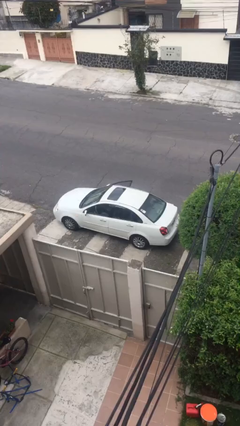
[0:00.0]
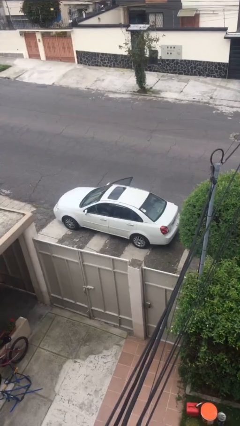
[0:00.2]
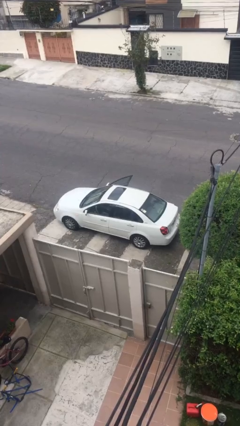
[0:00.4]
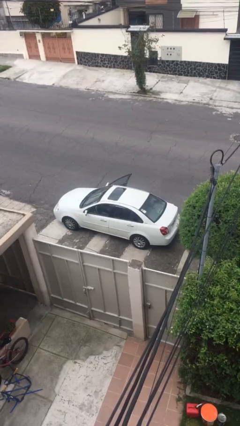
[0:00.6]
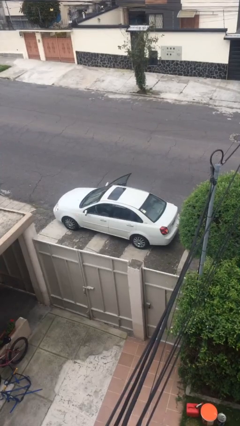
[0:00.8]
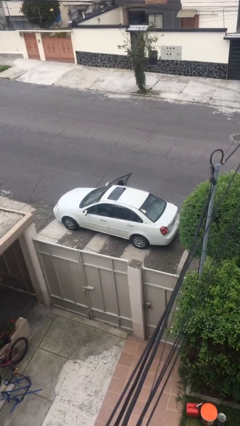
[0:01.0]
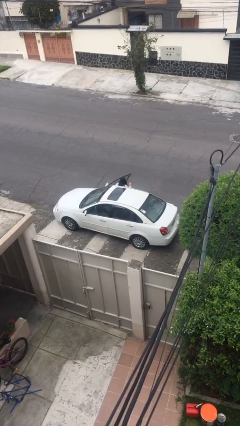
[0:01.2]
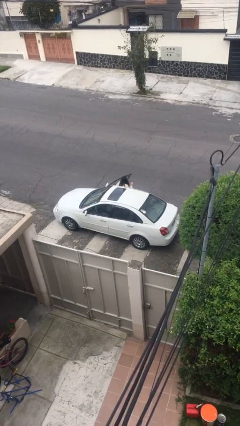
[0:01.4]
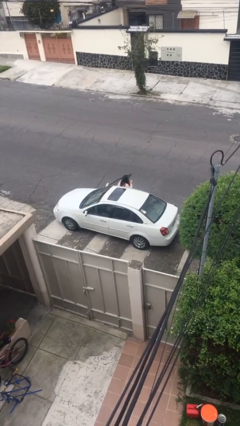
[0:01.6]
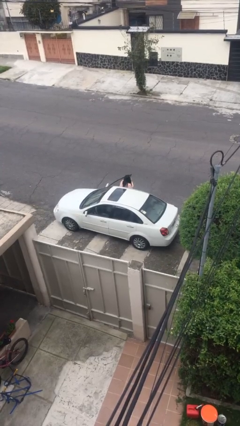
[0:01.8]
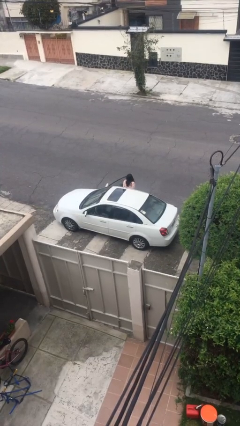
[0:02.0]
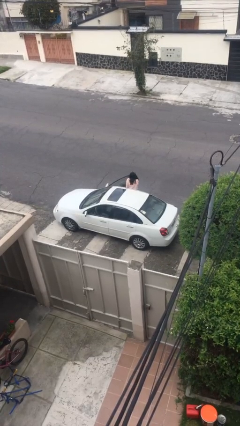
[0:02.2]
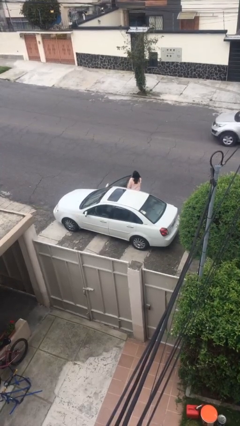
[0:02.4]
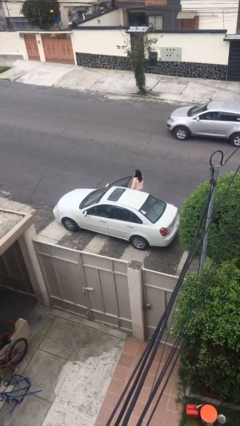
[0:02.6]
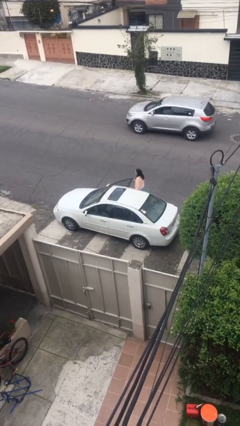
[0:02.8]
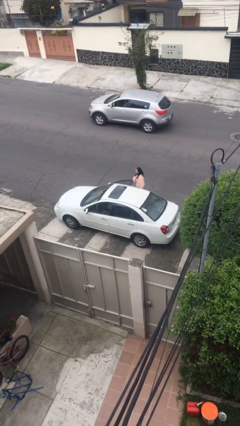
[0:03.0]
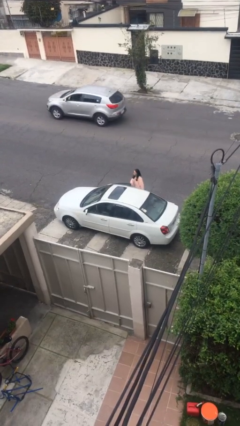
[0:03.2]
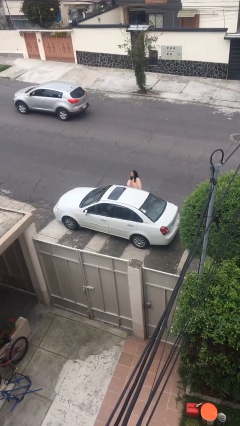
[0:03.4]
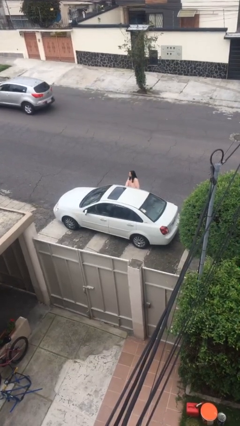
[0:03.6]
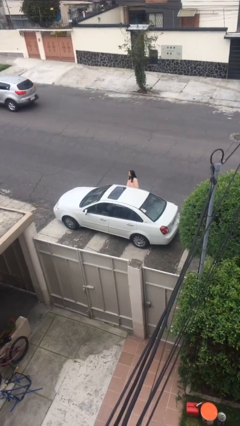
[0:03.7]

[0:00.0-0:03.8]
car drops off person

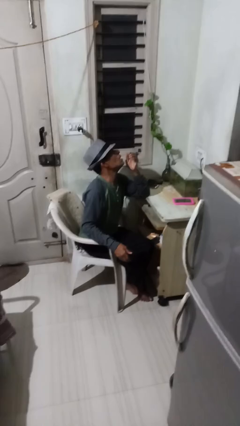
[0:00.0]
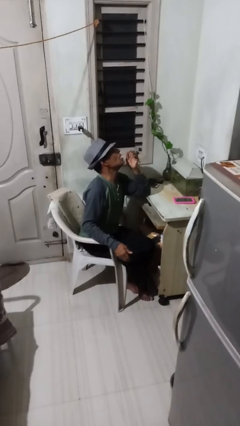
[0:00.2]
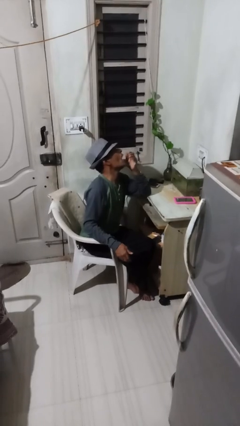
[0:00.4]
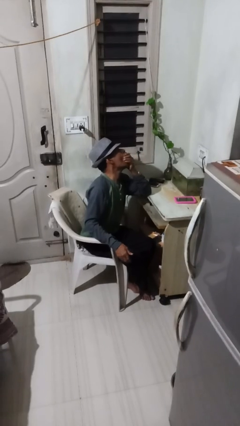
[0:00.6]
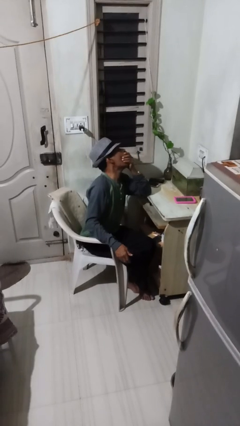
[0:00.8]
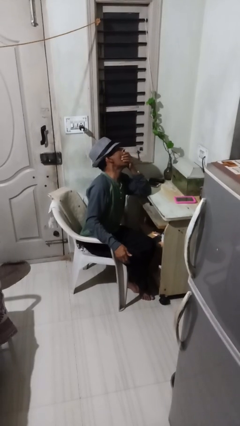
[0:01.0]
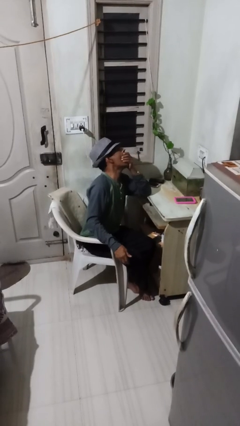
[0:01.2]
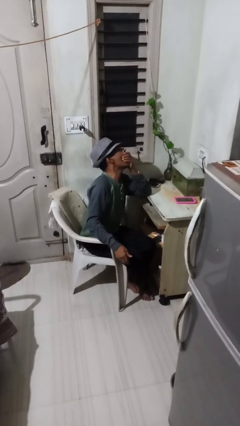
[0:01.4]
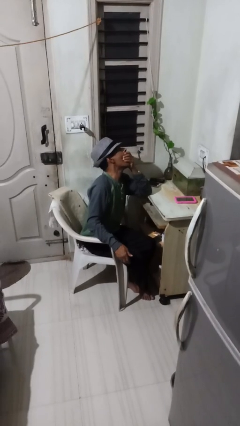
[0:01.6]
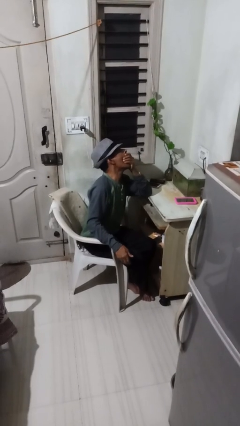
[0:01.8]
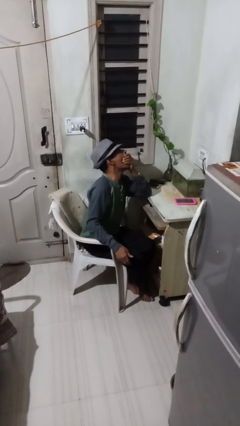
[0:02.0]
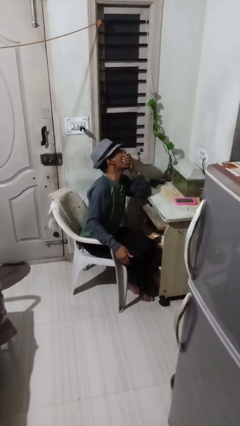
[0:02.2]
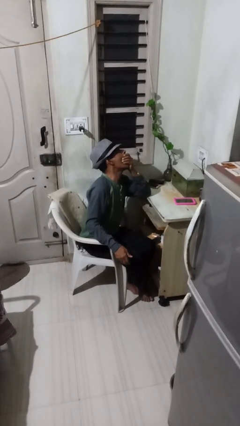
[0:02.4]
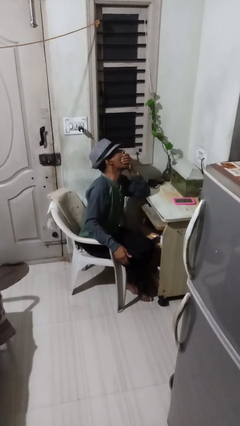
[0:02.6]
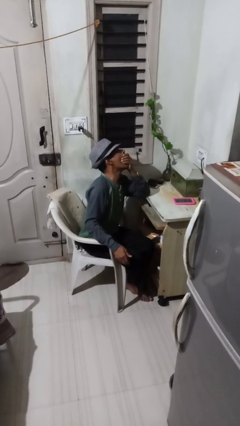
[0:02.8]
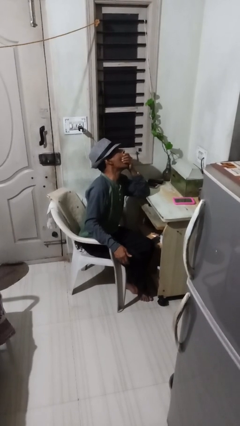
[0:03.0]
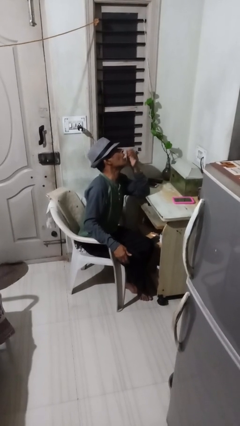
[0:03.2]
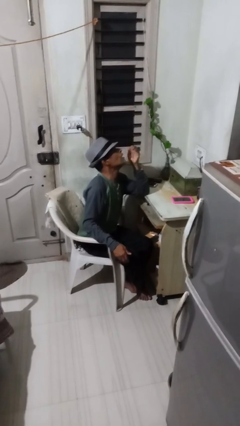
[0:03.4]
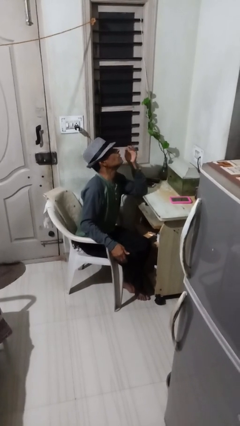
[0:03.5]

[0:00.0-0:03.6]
person yawns

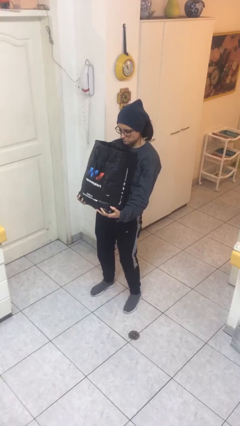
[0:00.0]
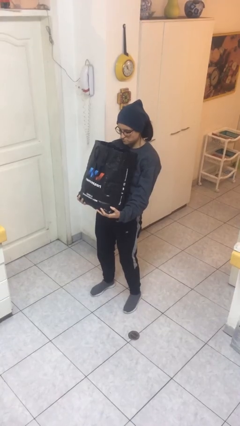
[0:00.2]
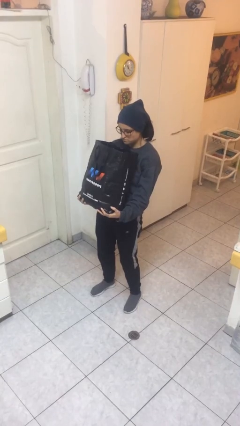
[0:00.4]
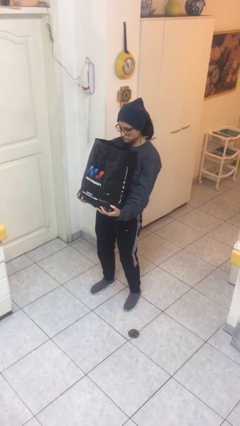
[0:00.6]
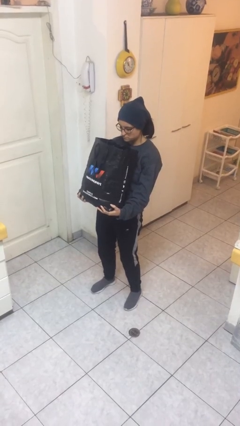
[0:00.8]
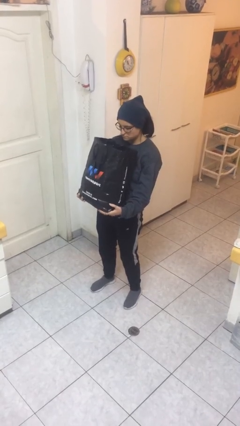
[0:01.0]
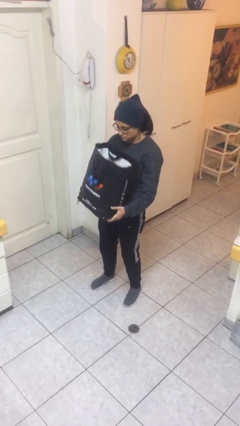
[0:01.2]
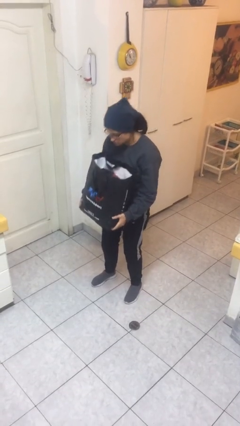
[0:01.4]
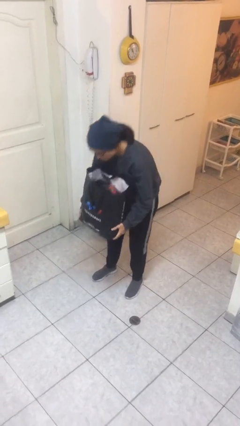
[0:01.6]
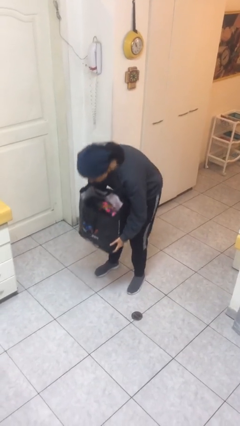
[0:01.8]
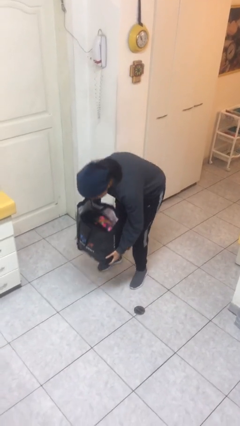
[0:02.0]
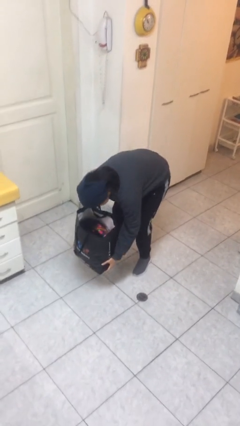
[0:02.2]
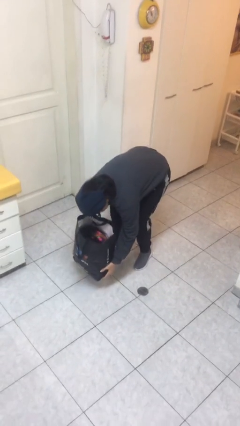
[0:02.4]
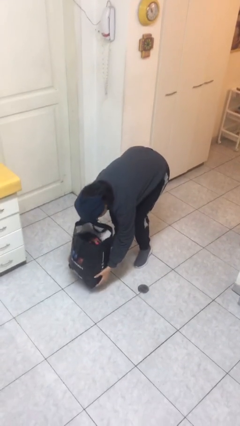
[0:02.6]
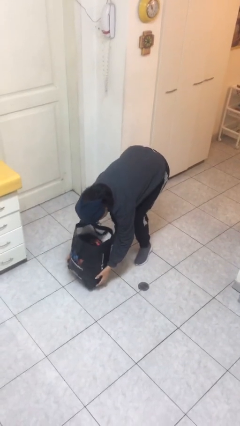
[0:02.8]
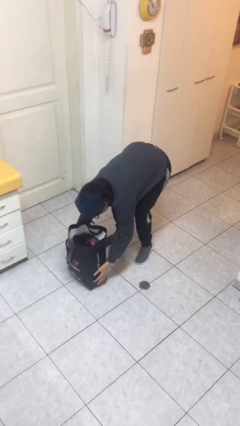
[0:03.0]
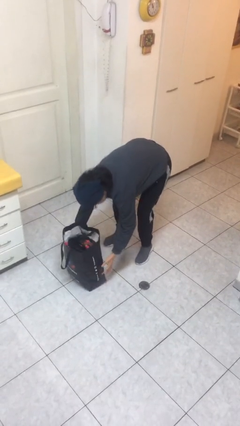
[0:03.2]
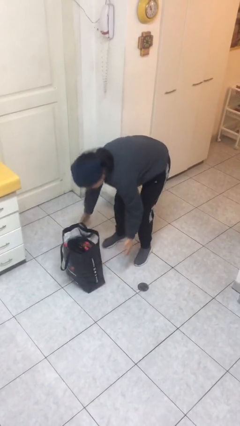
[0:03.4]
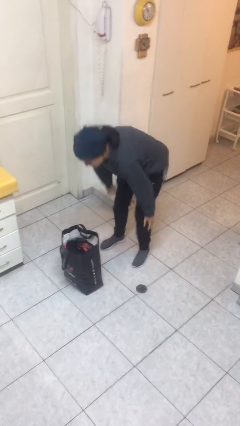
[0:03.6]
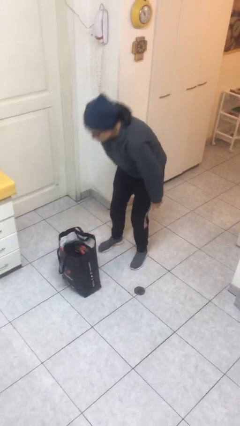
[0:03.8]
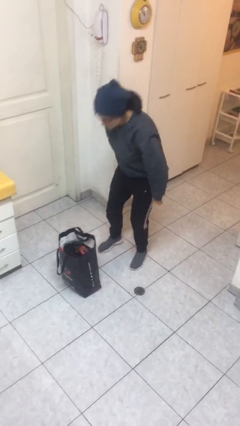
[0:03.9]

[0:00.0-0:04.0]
person puts down object on floor

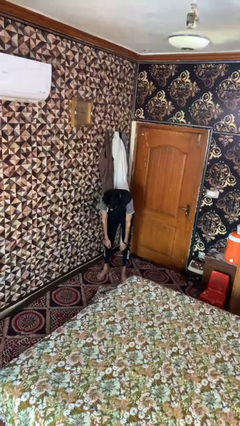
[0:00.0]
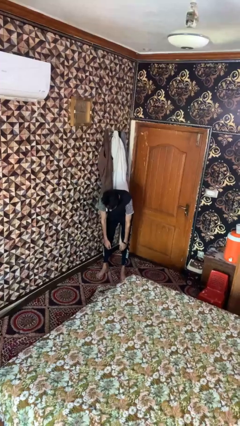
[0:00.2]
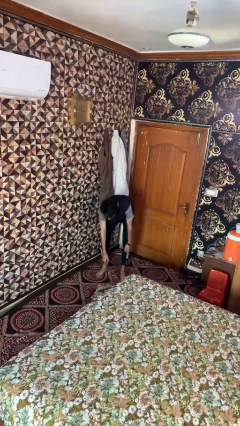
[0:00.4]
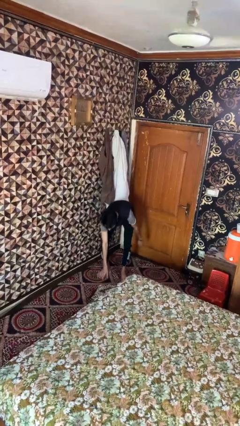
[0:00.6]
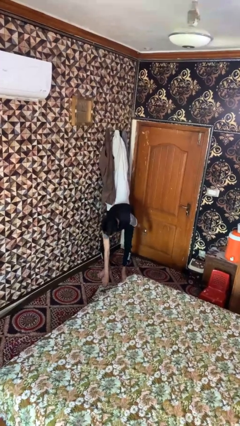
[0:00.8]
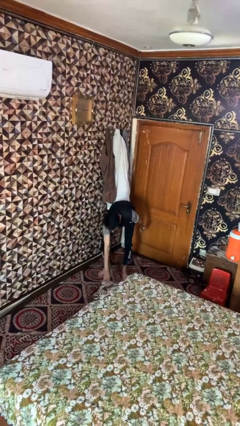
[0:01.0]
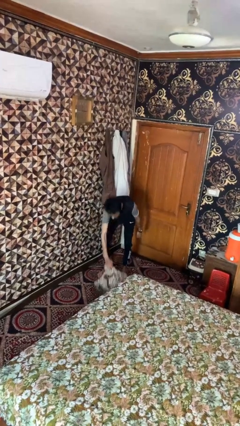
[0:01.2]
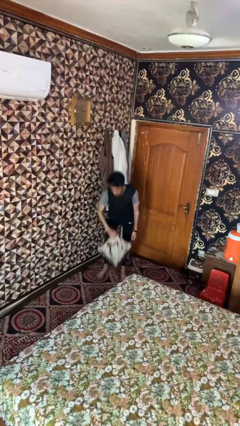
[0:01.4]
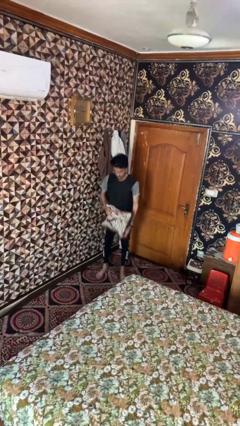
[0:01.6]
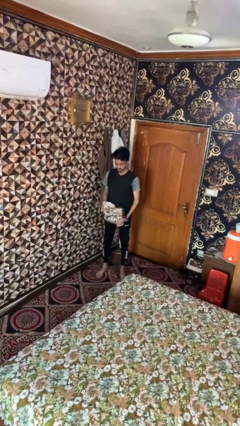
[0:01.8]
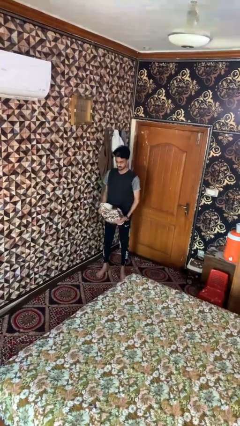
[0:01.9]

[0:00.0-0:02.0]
person picks up object from floor

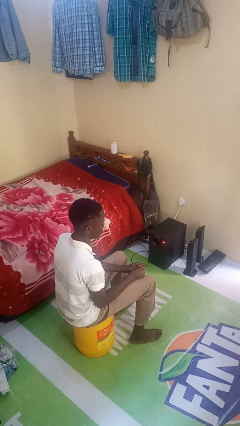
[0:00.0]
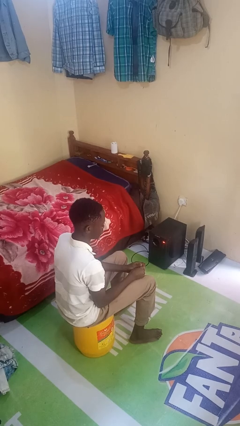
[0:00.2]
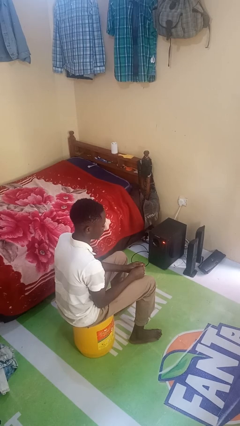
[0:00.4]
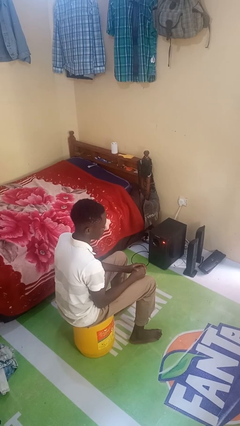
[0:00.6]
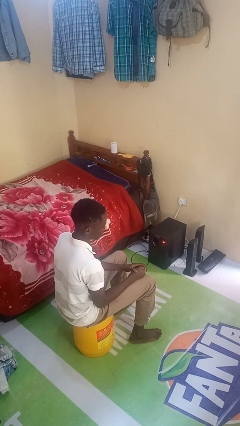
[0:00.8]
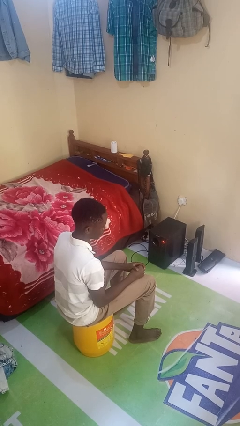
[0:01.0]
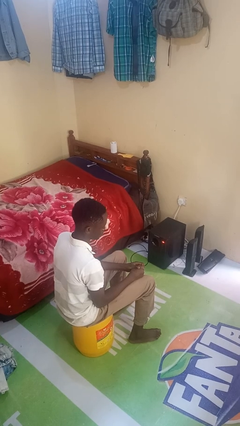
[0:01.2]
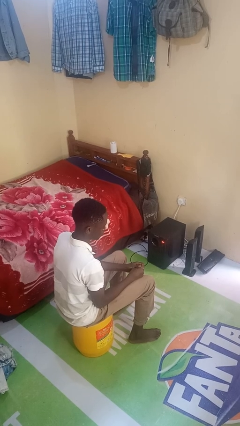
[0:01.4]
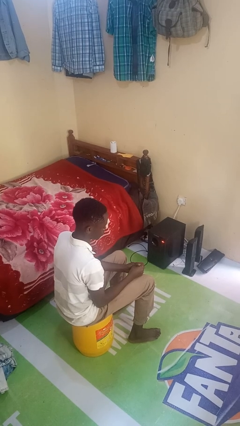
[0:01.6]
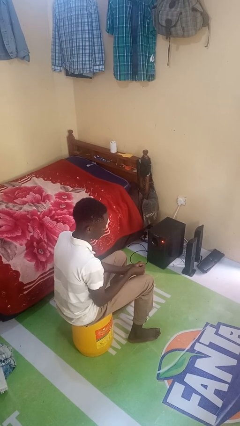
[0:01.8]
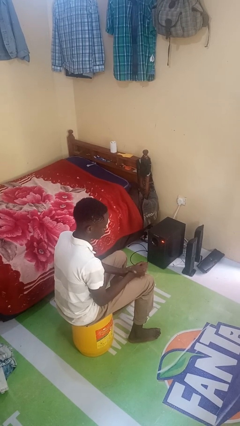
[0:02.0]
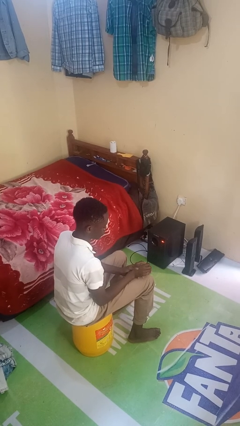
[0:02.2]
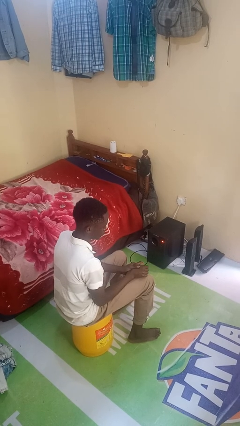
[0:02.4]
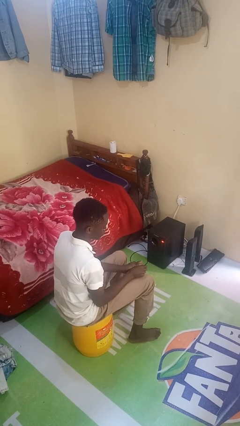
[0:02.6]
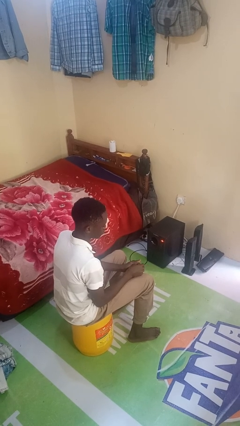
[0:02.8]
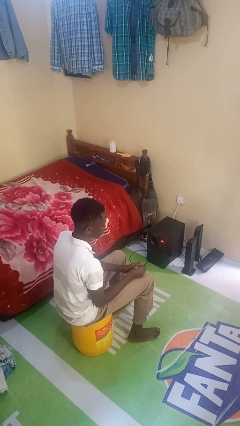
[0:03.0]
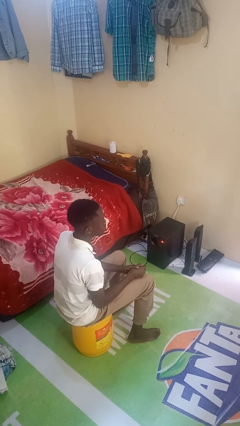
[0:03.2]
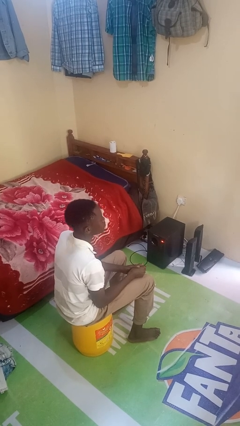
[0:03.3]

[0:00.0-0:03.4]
person looks at hands in lap

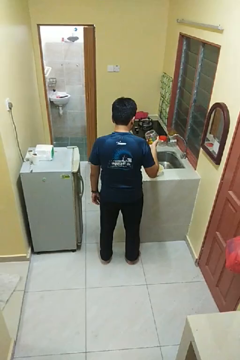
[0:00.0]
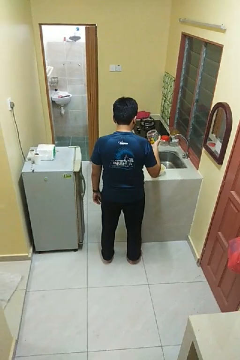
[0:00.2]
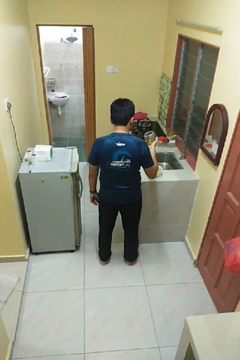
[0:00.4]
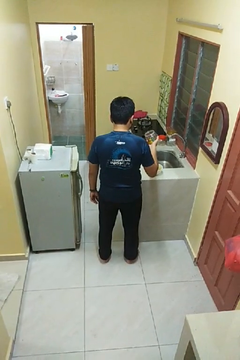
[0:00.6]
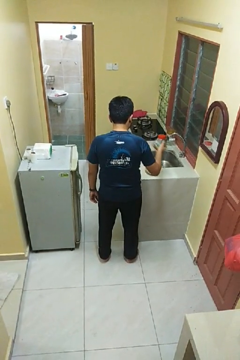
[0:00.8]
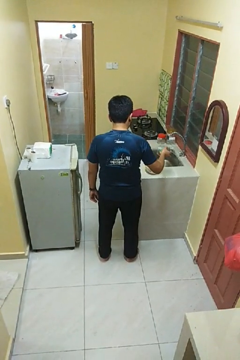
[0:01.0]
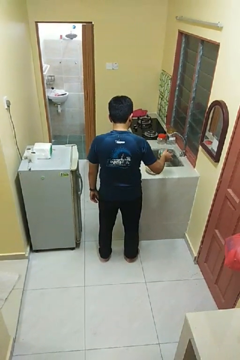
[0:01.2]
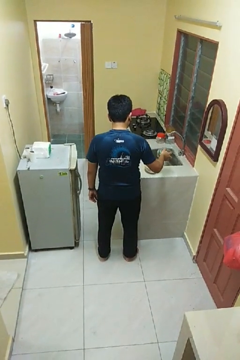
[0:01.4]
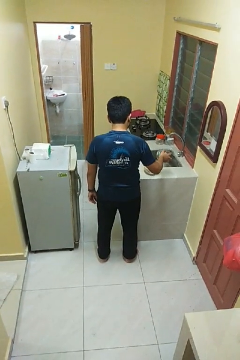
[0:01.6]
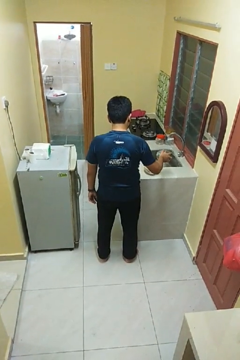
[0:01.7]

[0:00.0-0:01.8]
person pours into bowl
